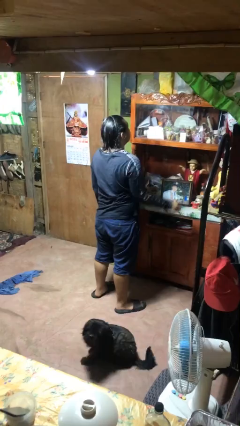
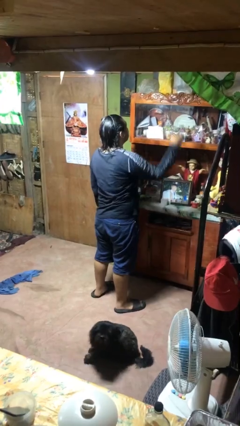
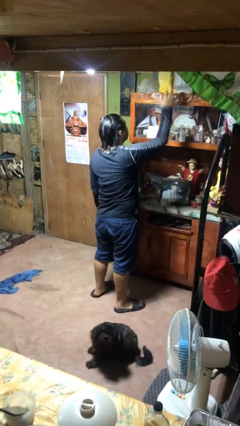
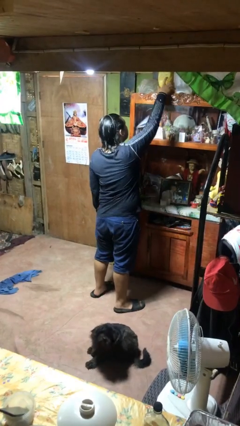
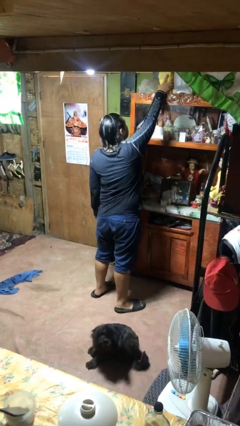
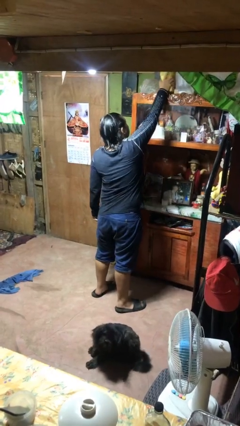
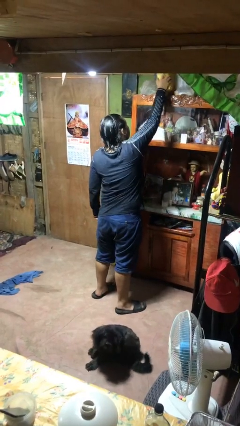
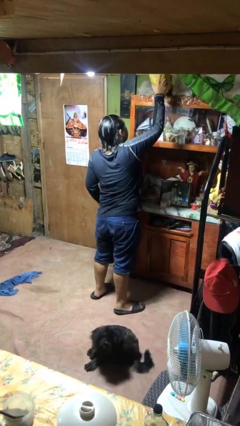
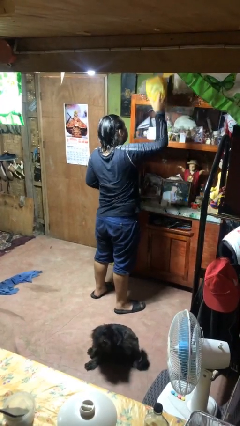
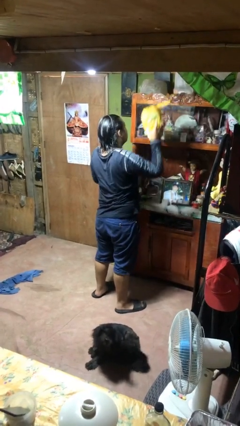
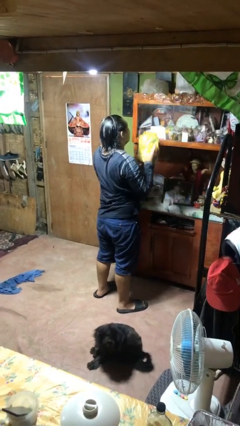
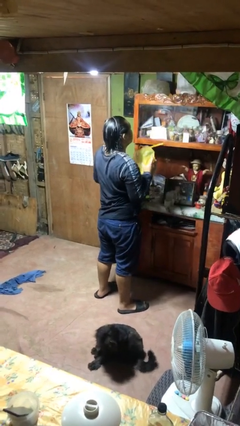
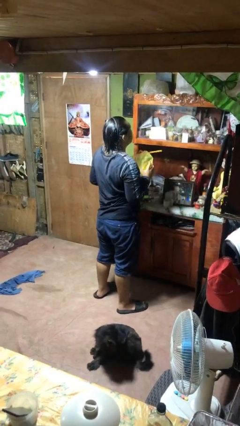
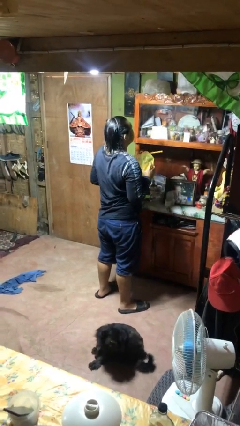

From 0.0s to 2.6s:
person picks up object from shelf

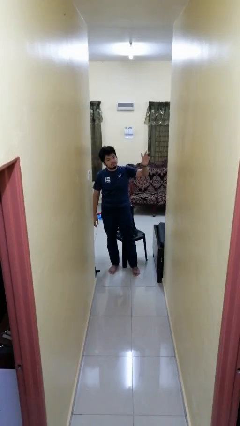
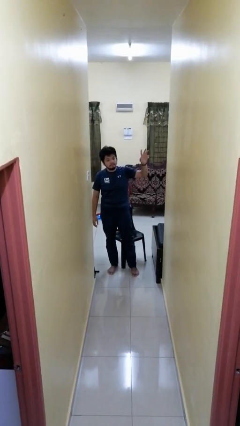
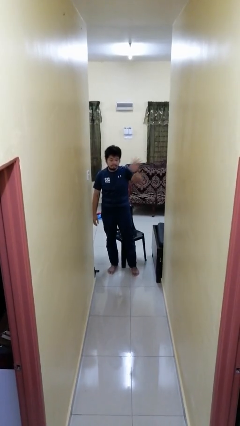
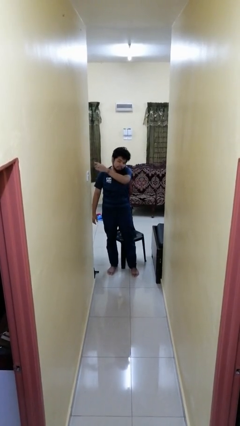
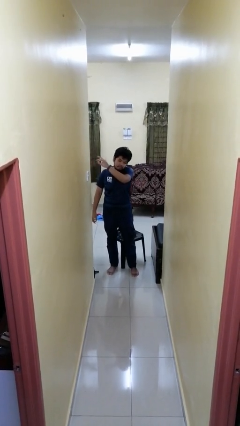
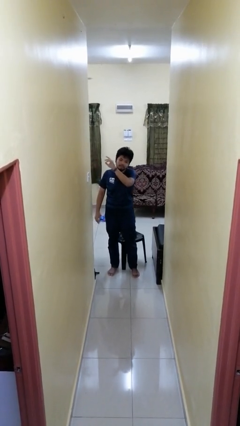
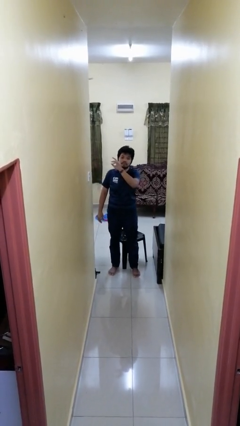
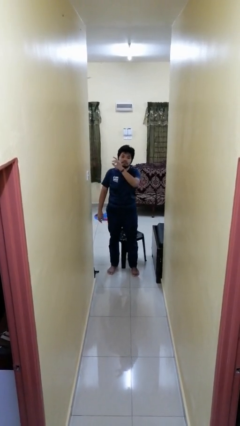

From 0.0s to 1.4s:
person gestures swipe right

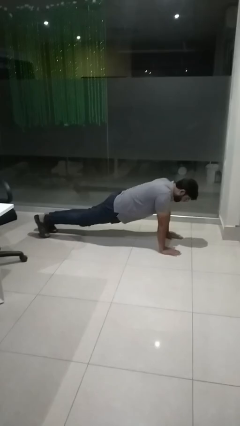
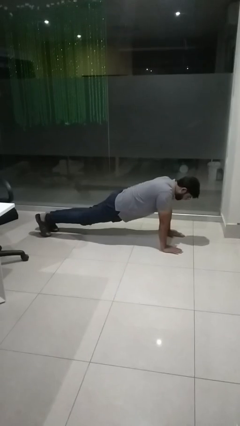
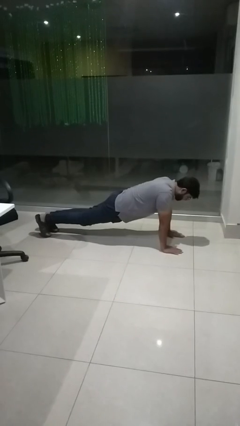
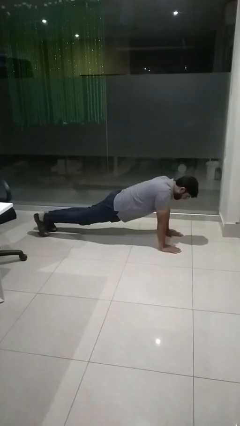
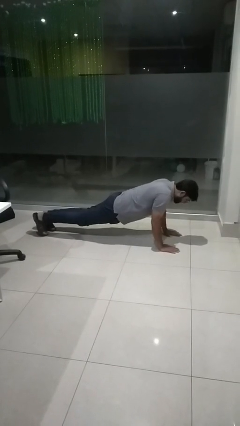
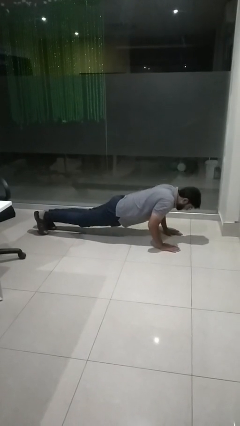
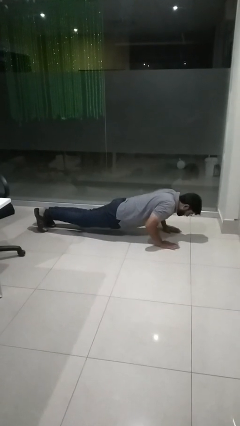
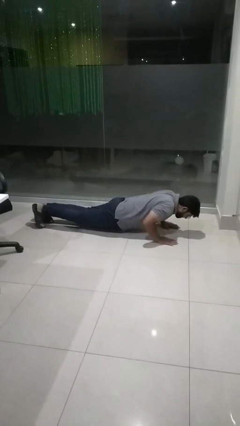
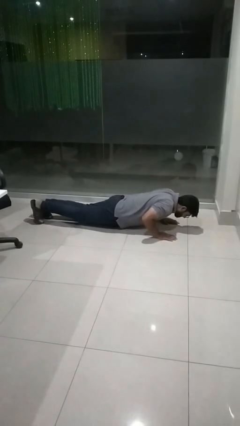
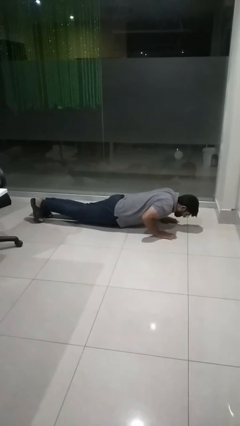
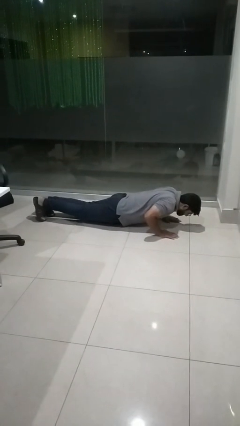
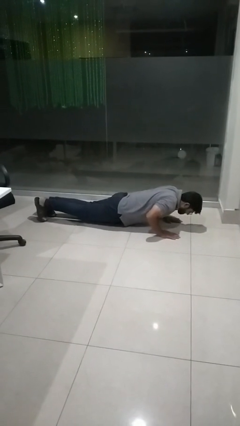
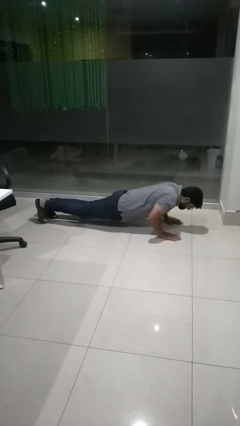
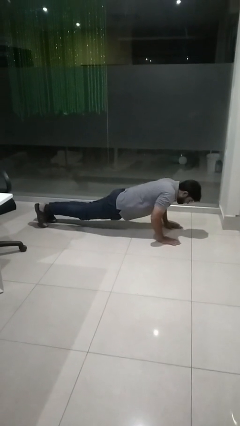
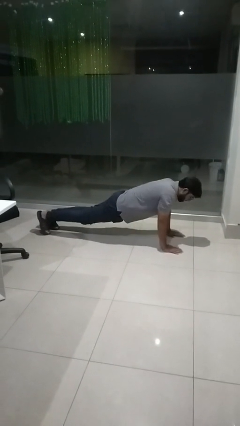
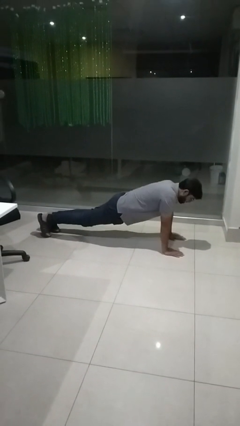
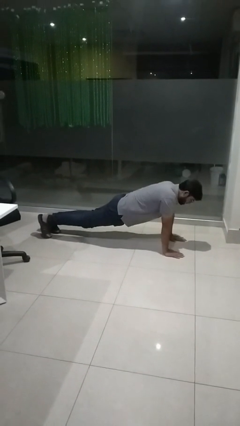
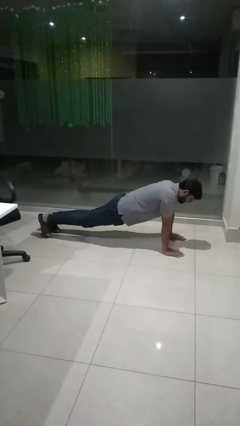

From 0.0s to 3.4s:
person exercises with pushup

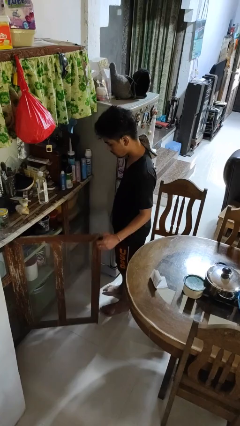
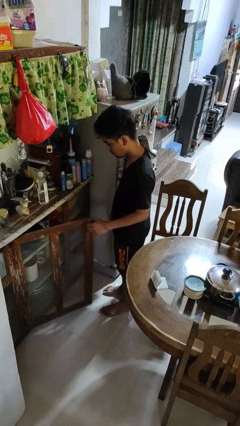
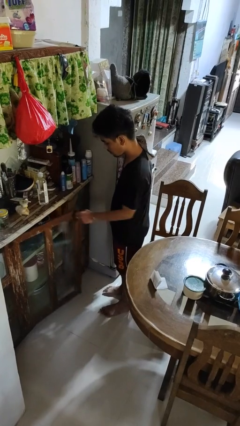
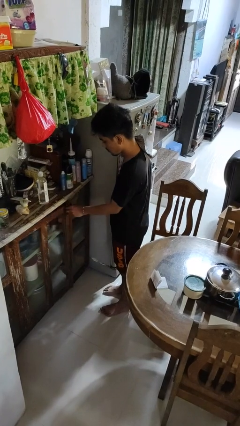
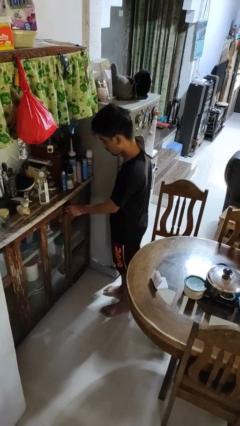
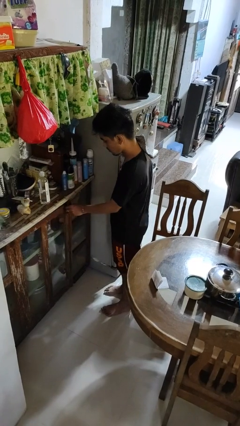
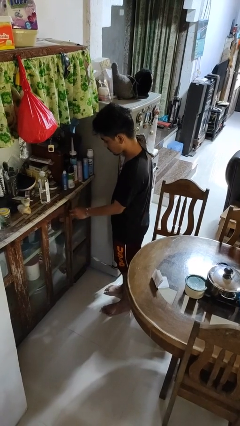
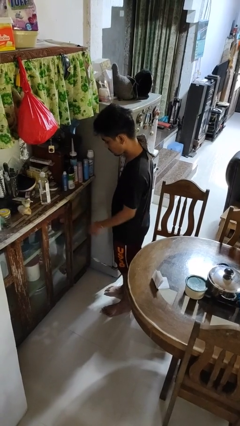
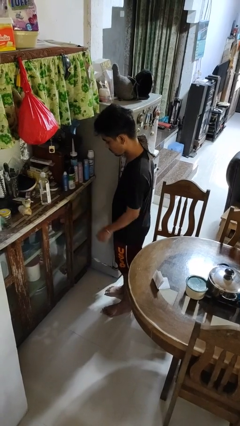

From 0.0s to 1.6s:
person closes cabinet

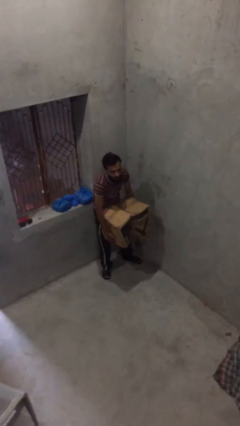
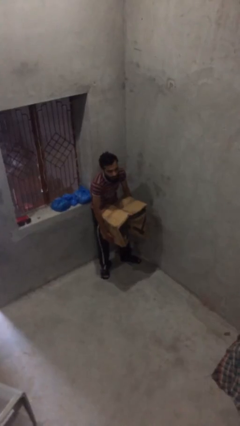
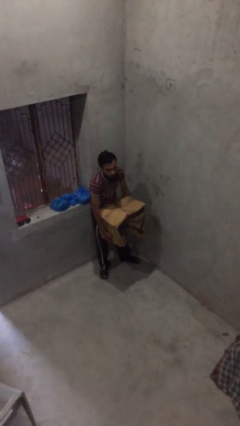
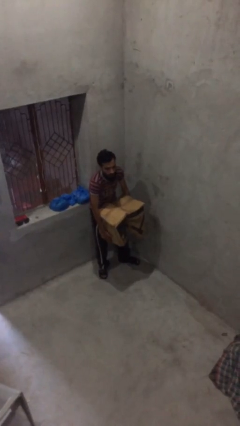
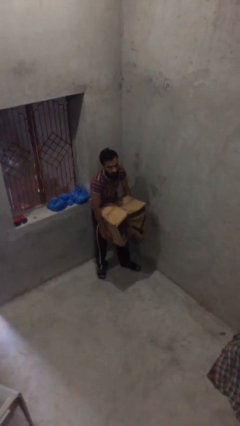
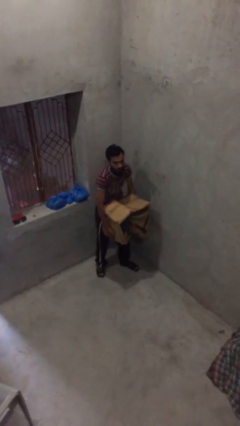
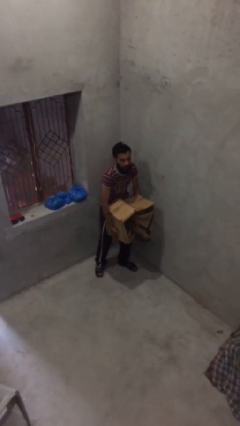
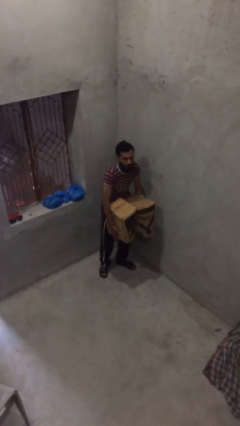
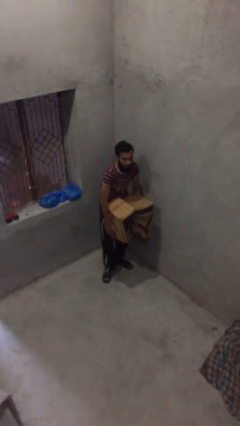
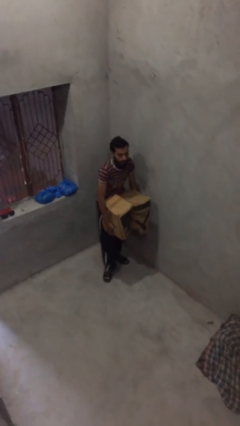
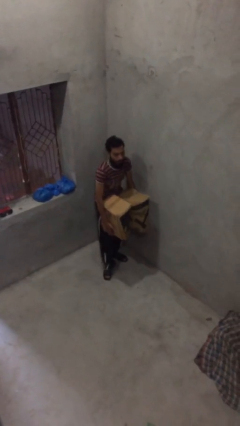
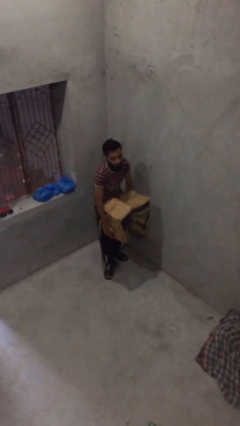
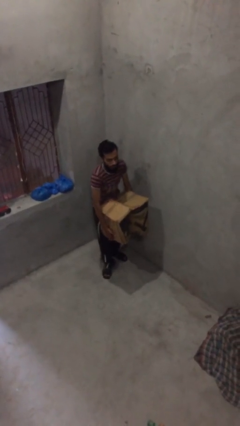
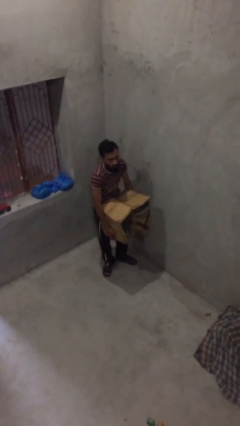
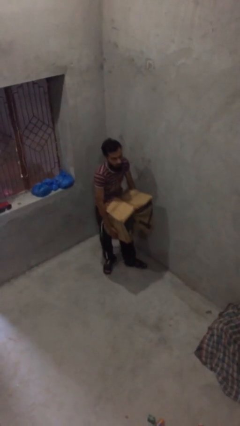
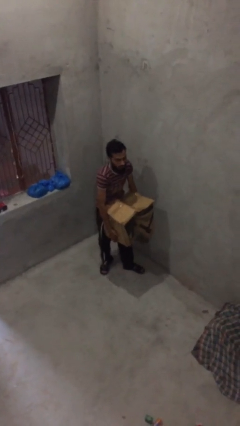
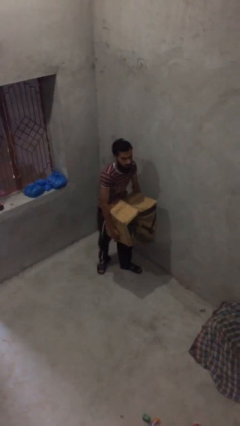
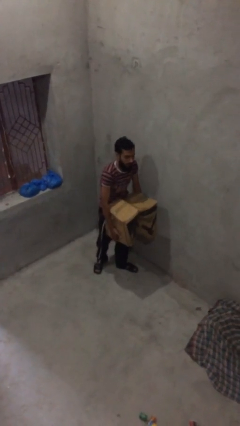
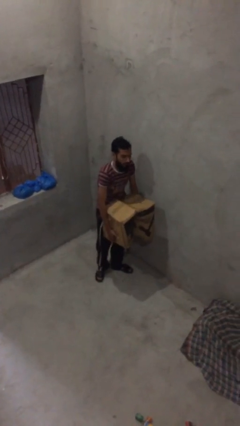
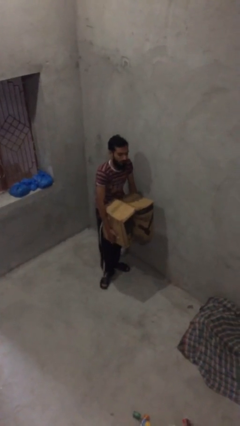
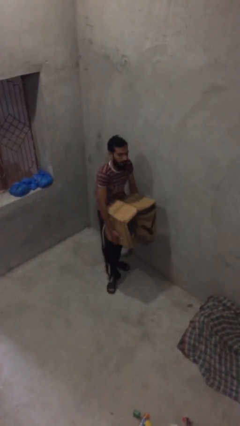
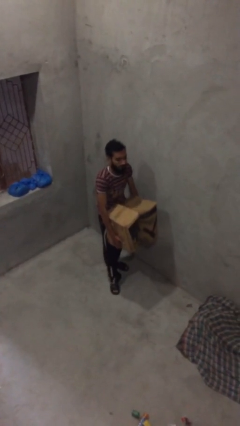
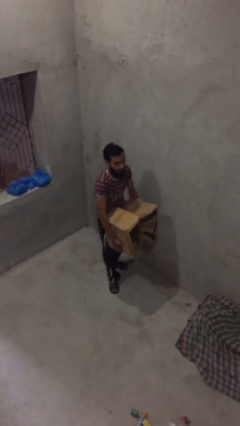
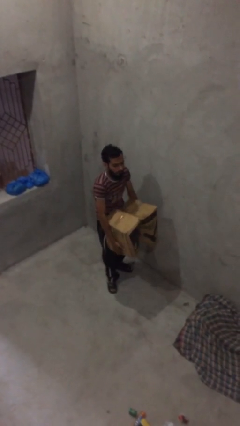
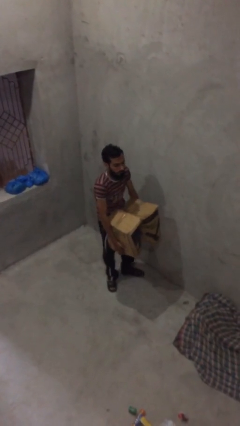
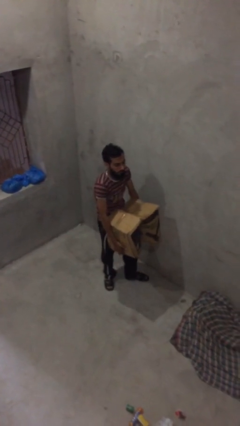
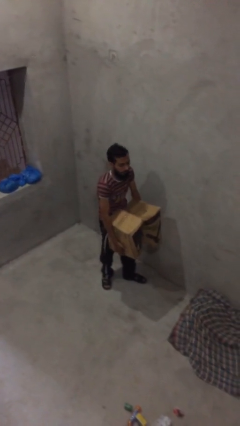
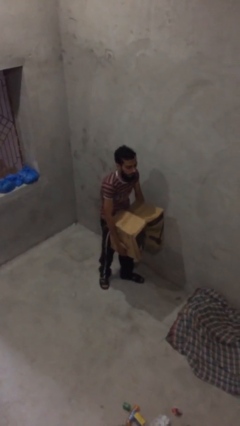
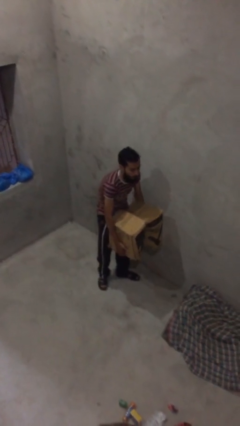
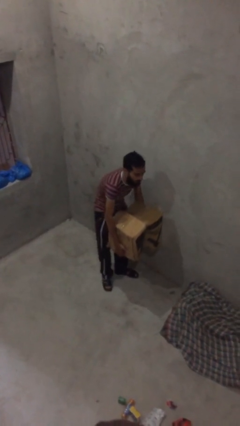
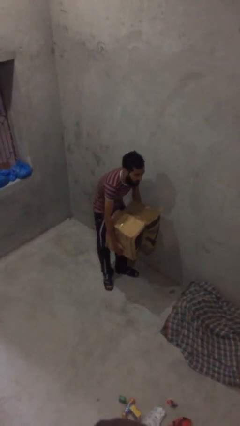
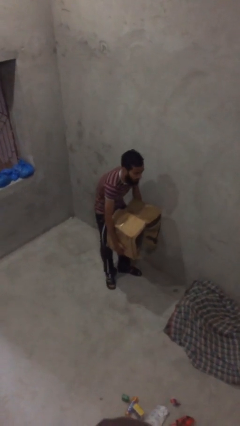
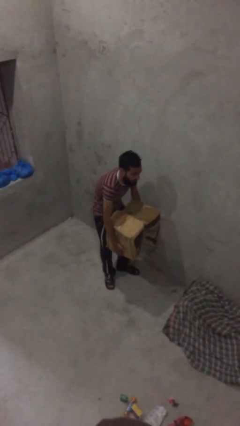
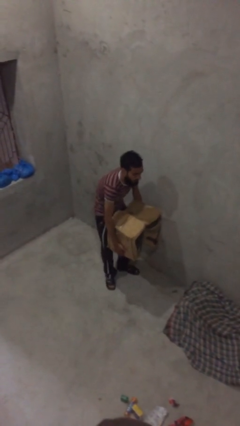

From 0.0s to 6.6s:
person carries heavy object

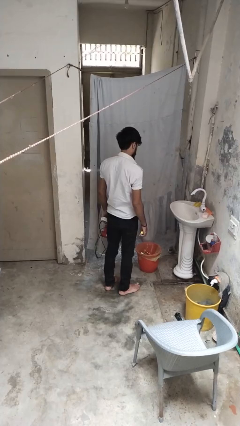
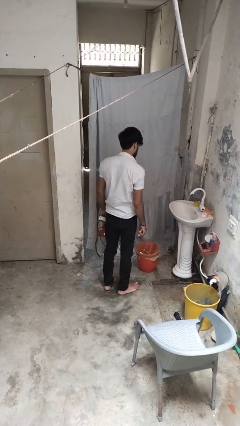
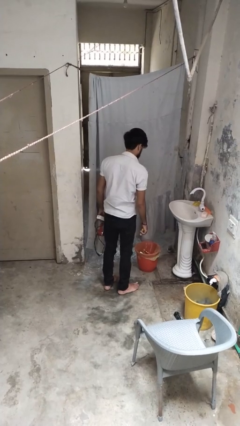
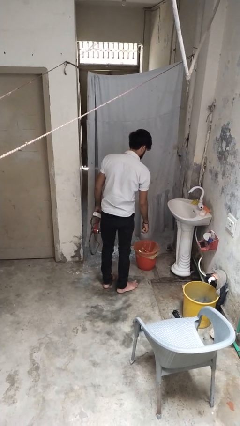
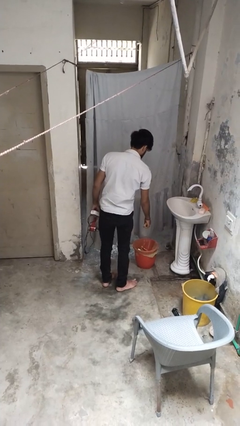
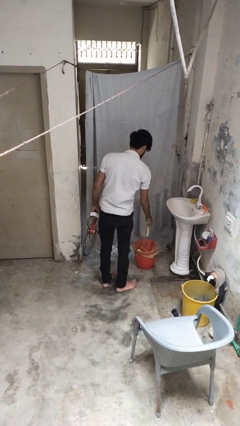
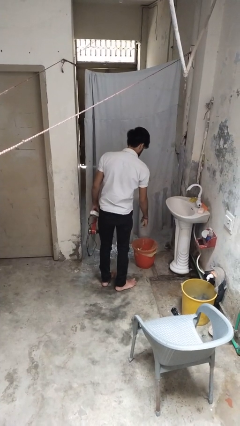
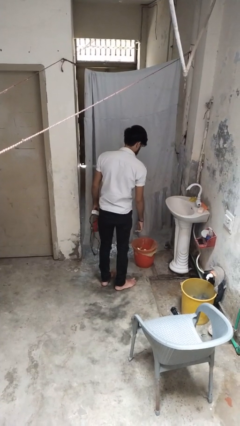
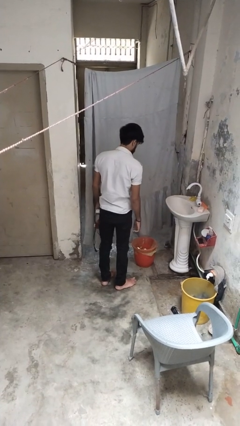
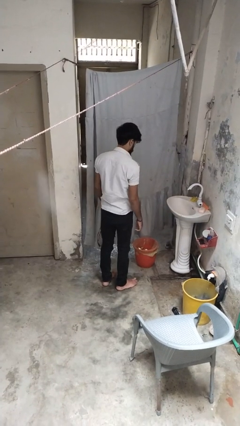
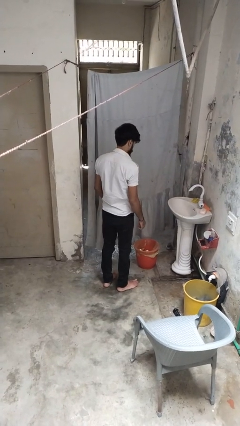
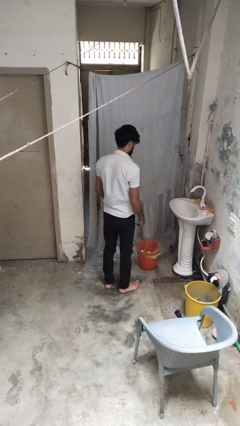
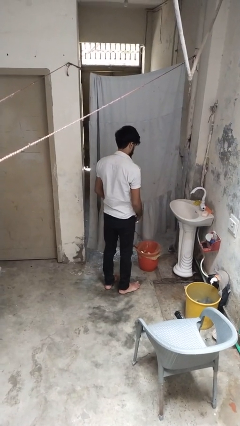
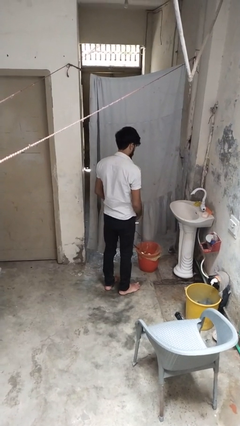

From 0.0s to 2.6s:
person discards trash
